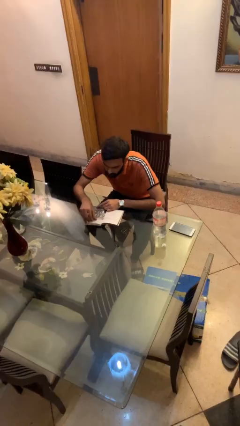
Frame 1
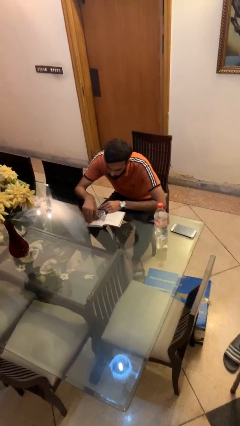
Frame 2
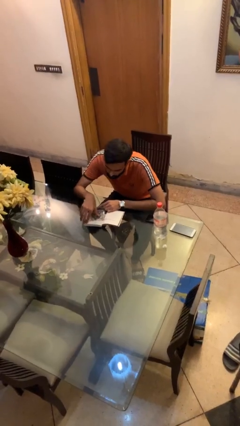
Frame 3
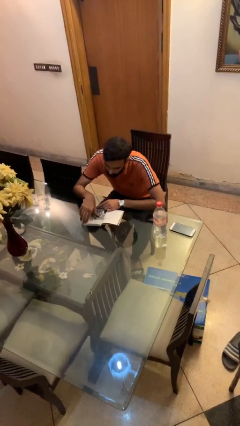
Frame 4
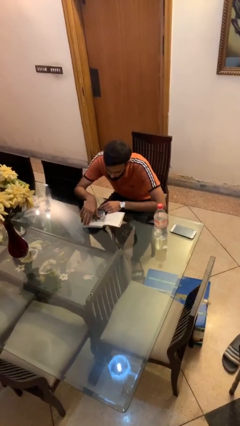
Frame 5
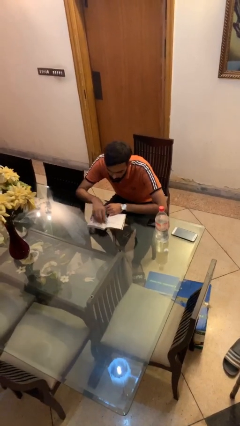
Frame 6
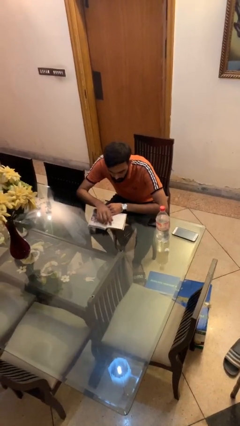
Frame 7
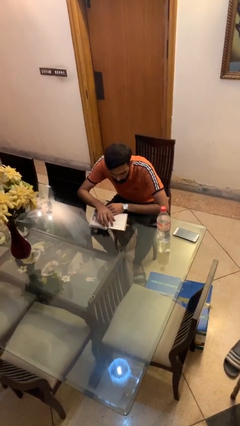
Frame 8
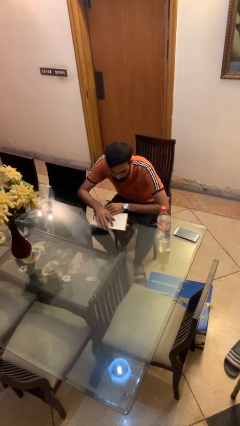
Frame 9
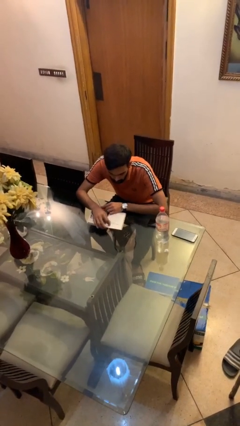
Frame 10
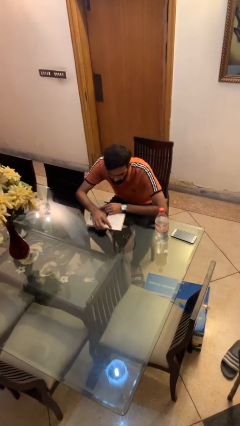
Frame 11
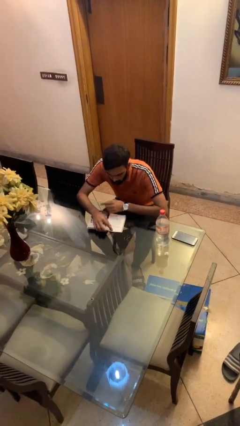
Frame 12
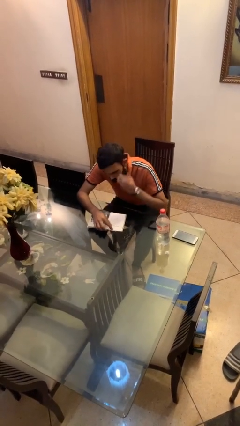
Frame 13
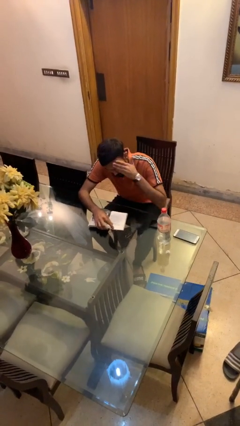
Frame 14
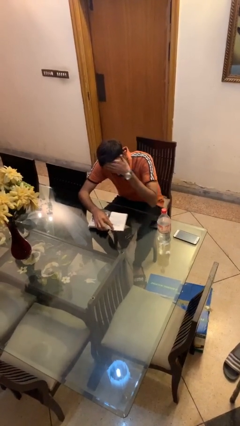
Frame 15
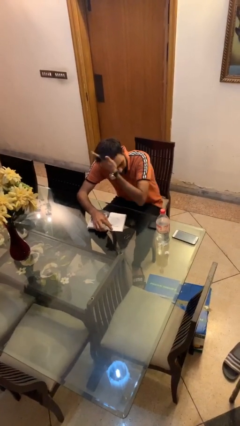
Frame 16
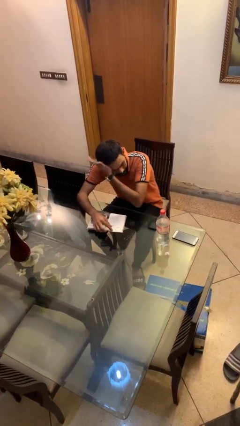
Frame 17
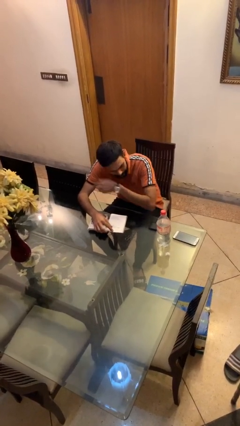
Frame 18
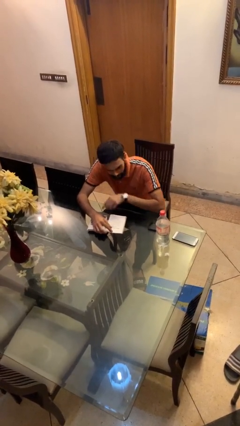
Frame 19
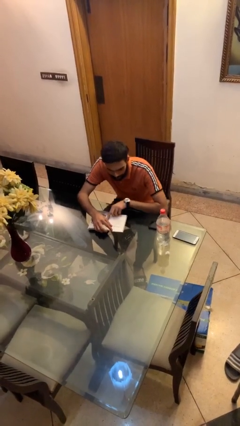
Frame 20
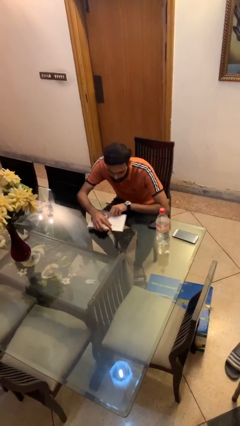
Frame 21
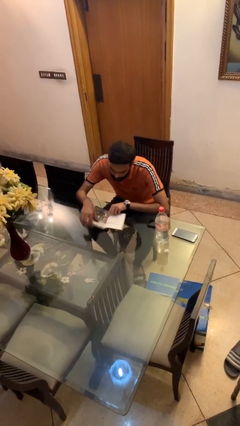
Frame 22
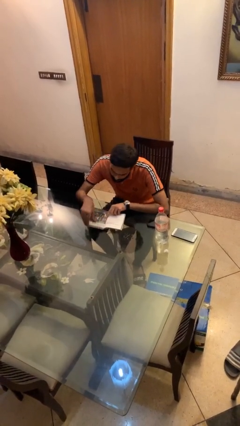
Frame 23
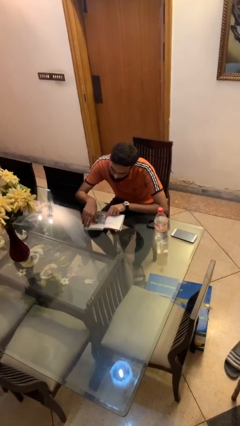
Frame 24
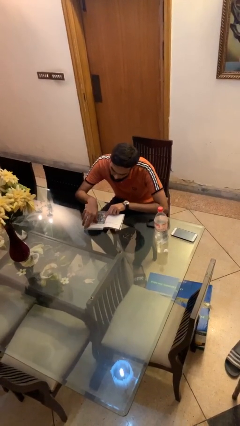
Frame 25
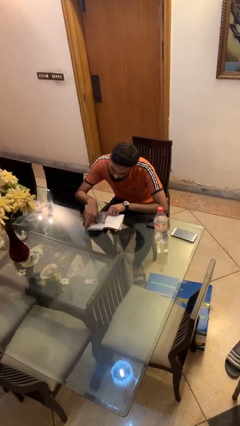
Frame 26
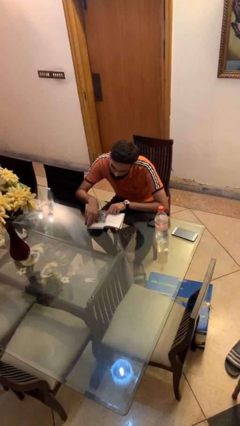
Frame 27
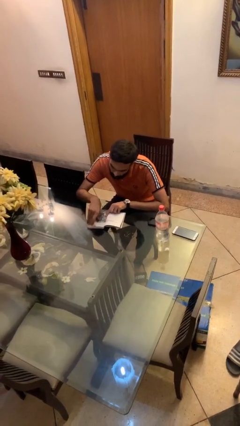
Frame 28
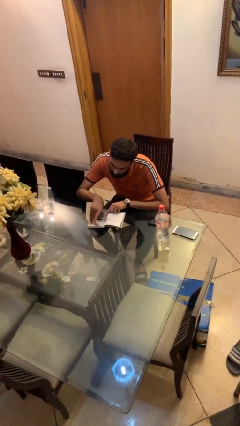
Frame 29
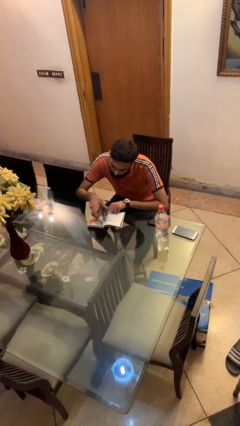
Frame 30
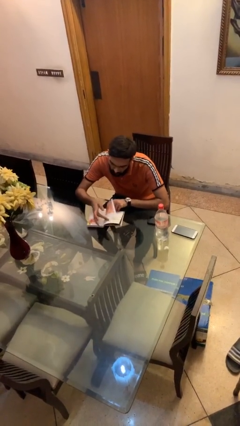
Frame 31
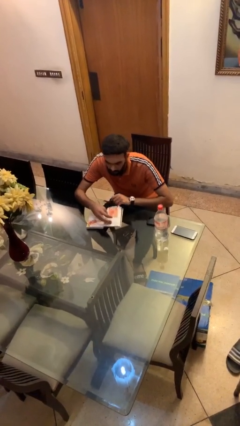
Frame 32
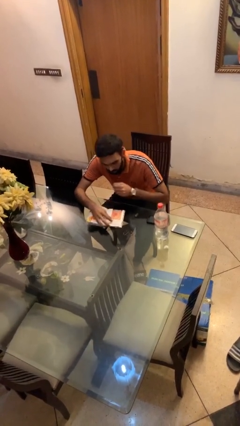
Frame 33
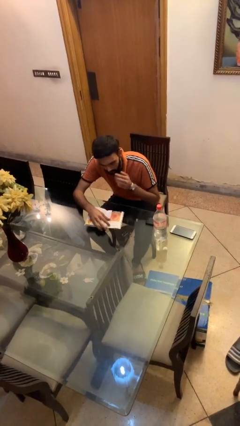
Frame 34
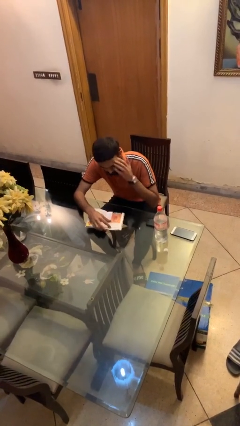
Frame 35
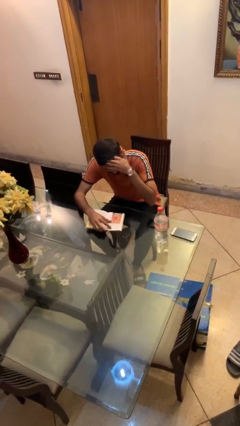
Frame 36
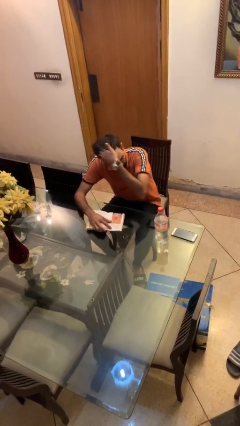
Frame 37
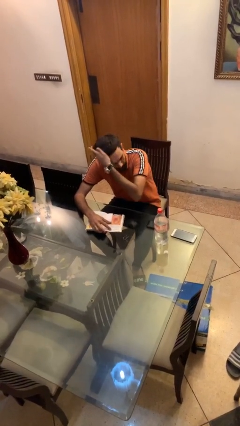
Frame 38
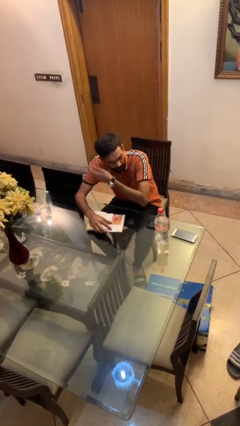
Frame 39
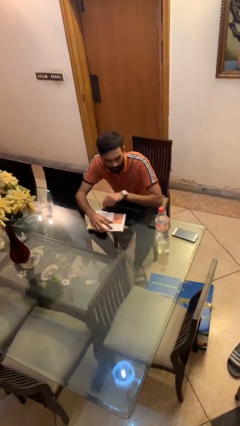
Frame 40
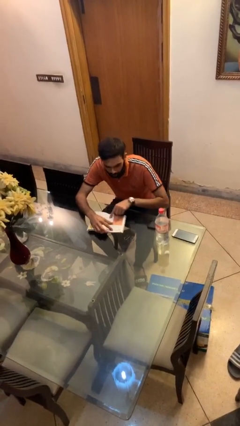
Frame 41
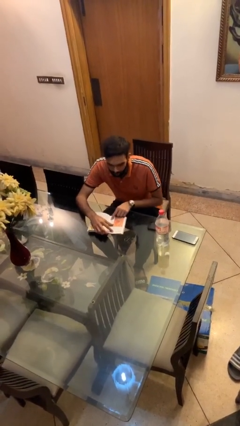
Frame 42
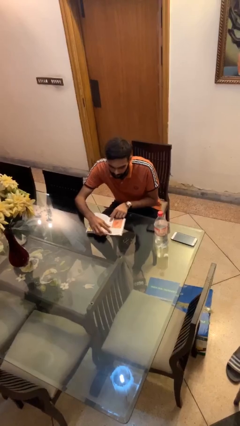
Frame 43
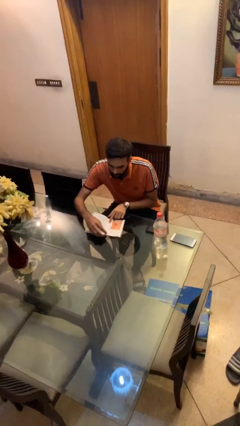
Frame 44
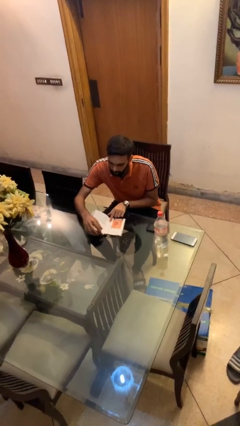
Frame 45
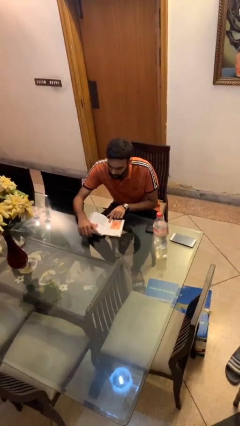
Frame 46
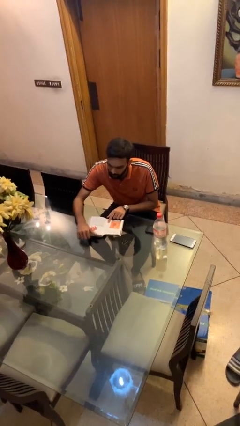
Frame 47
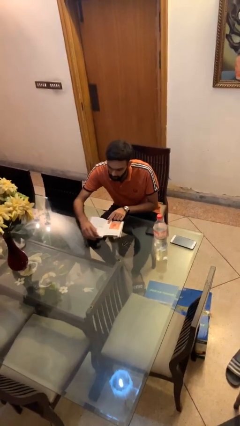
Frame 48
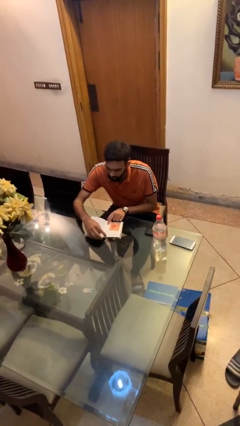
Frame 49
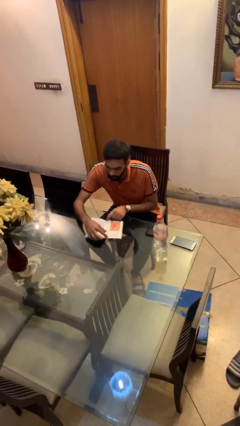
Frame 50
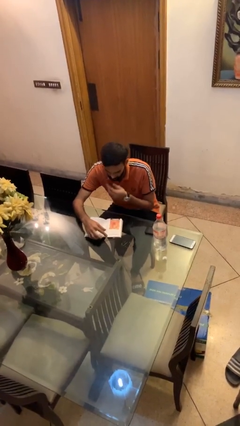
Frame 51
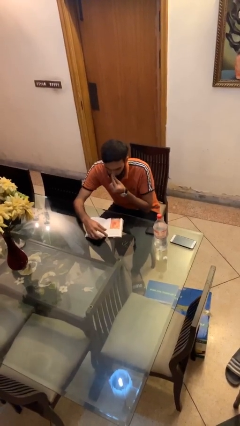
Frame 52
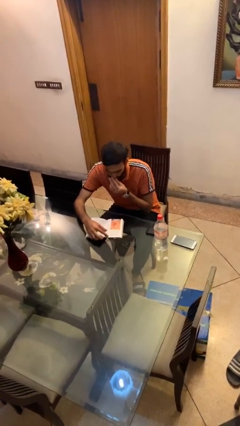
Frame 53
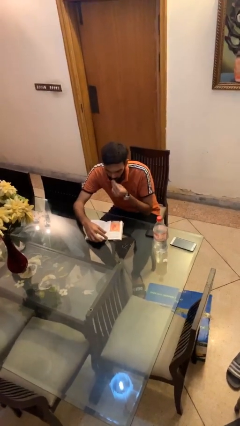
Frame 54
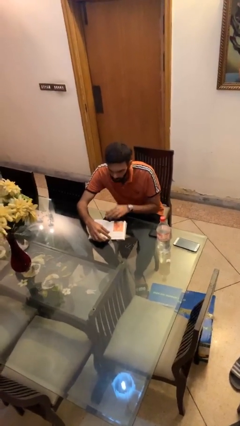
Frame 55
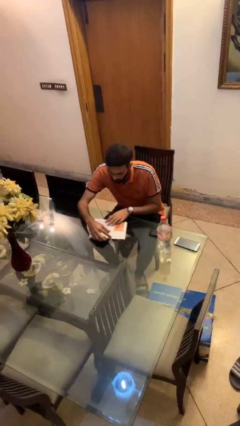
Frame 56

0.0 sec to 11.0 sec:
person reads document

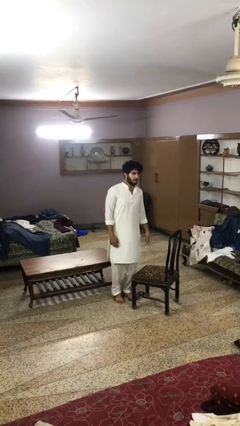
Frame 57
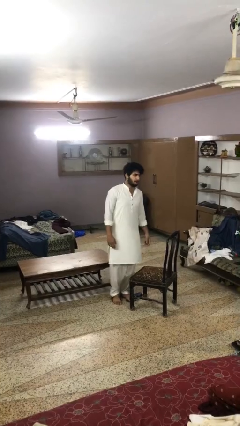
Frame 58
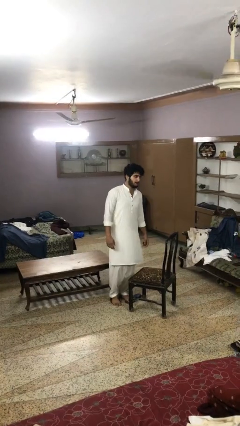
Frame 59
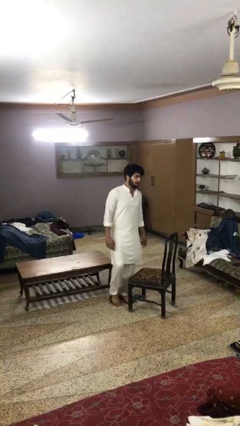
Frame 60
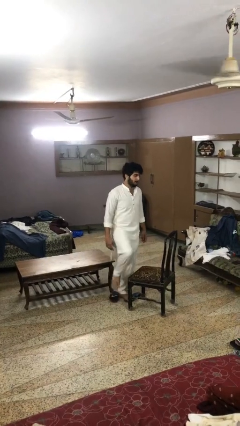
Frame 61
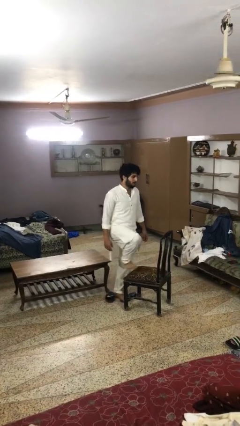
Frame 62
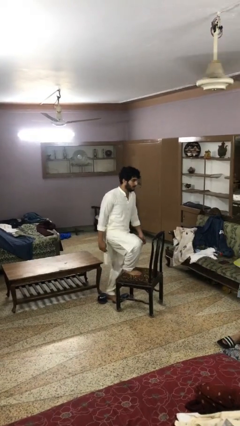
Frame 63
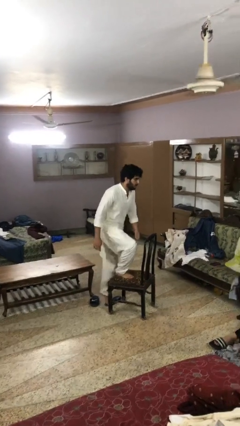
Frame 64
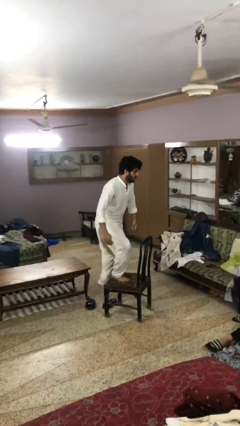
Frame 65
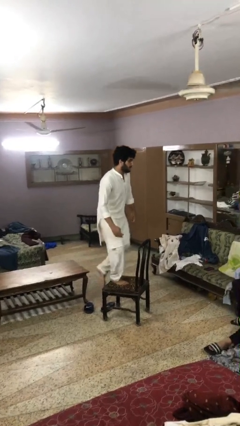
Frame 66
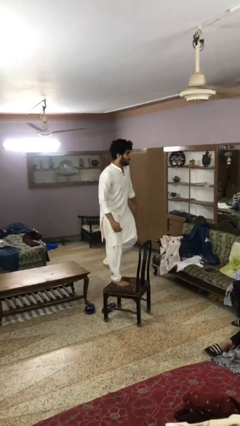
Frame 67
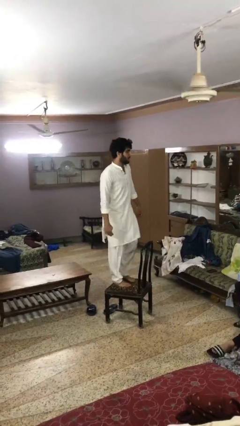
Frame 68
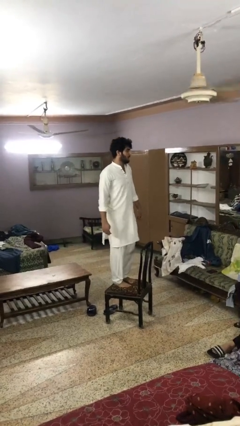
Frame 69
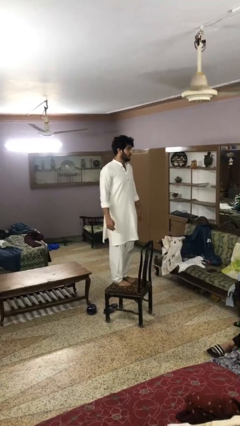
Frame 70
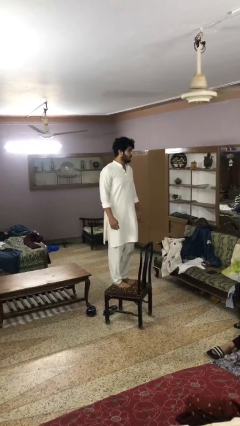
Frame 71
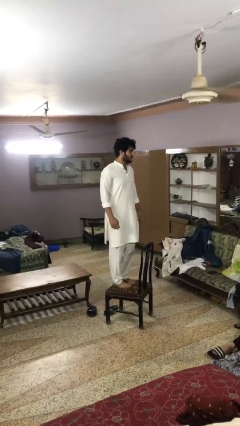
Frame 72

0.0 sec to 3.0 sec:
person climbs on chair

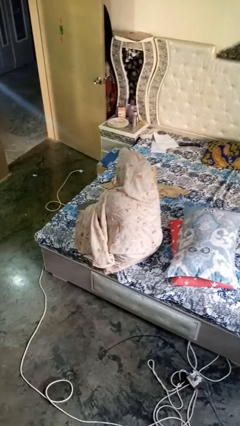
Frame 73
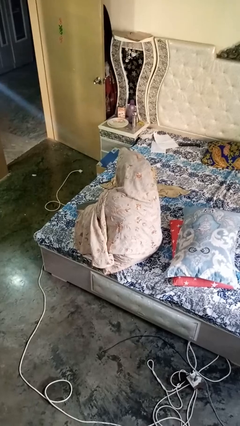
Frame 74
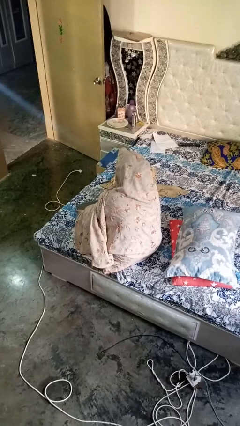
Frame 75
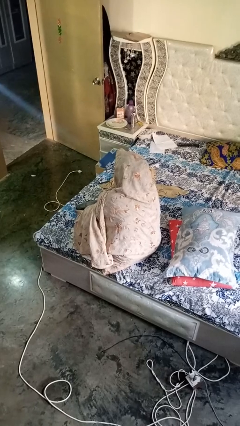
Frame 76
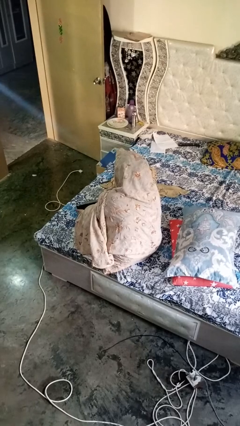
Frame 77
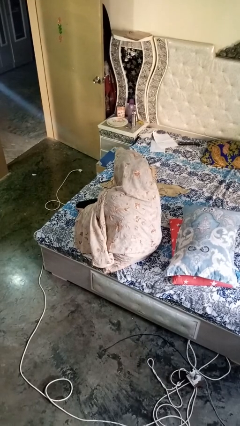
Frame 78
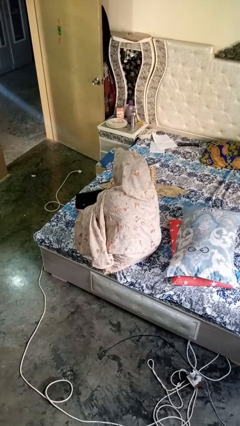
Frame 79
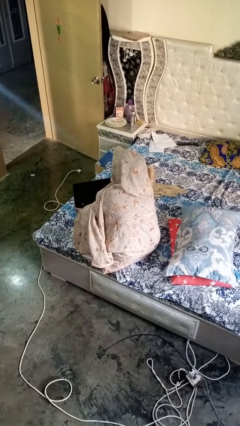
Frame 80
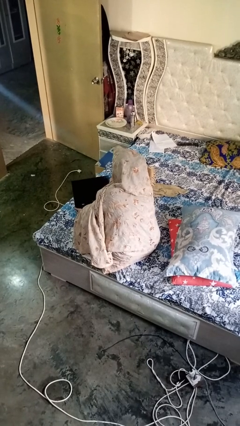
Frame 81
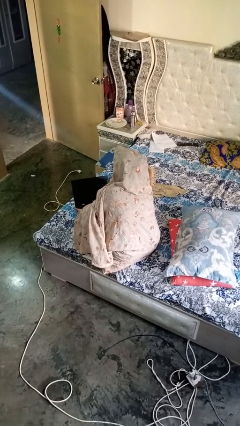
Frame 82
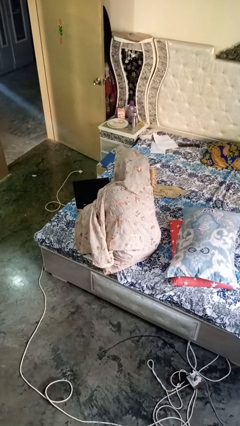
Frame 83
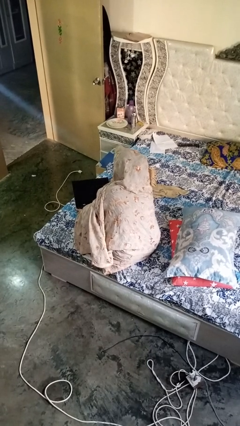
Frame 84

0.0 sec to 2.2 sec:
person opens laptop

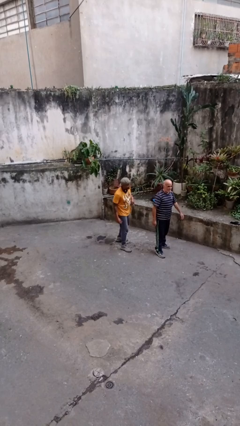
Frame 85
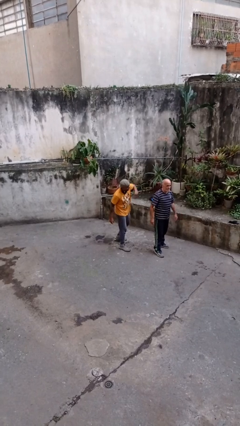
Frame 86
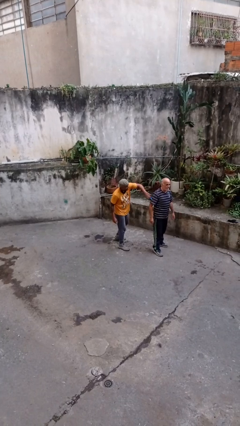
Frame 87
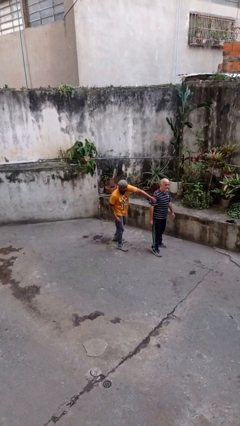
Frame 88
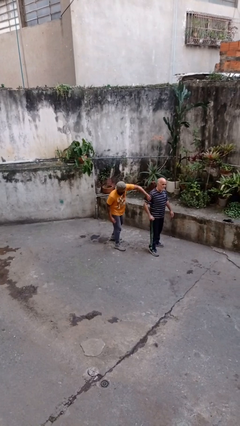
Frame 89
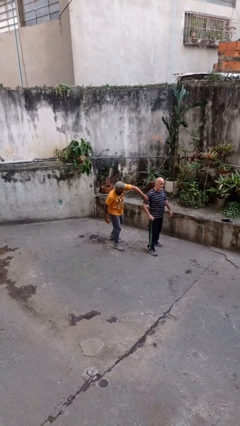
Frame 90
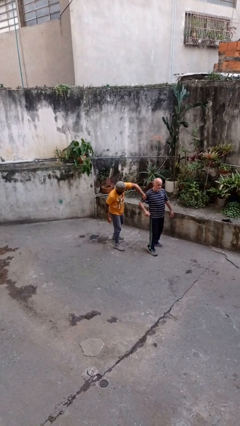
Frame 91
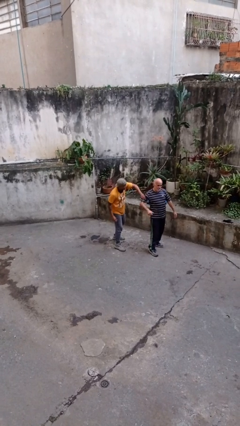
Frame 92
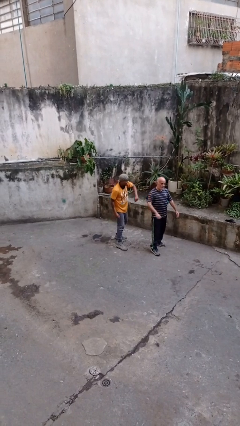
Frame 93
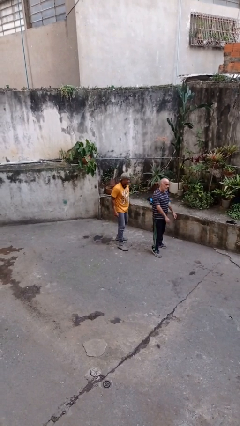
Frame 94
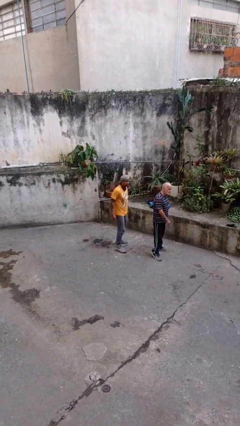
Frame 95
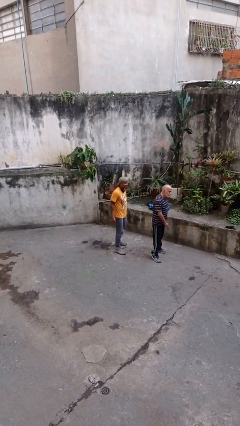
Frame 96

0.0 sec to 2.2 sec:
person grabs person by bicep
